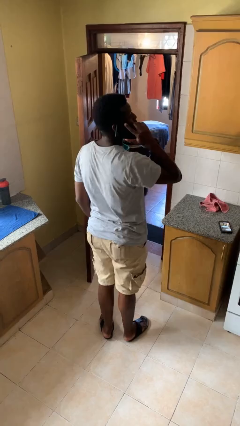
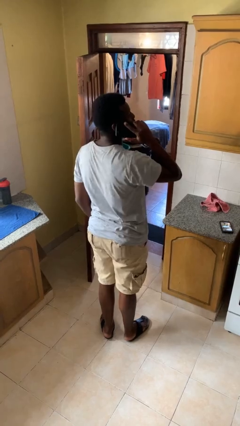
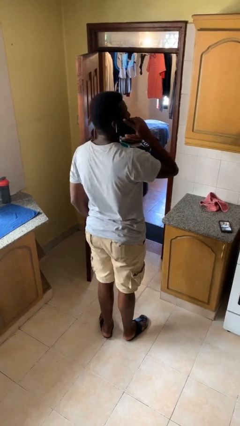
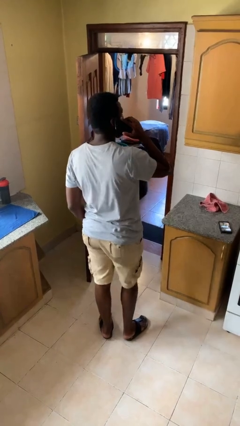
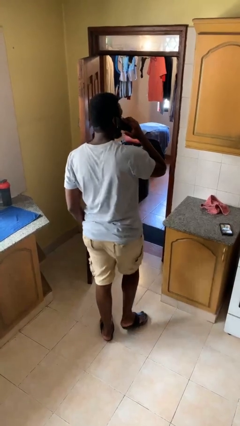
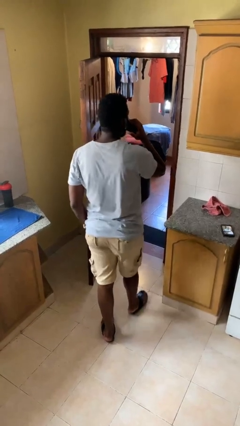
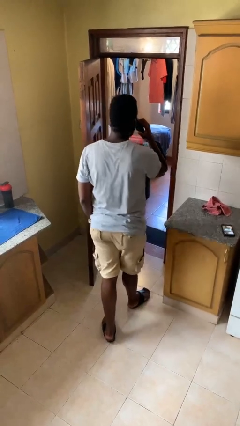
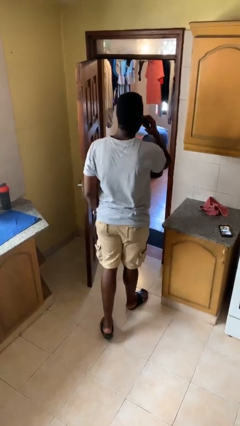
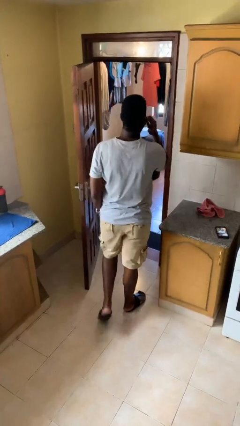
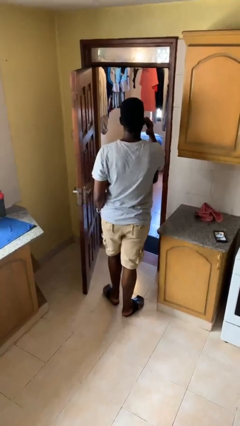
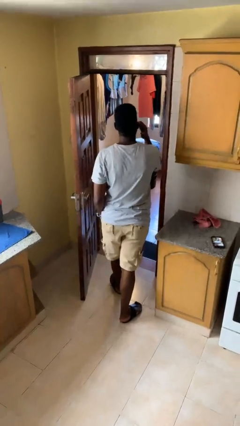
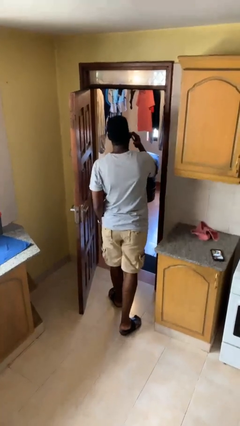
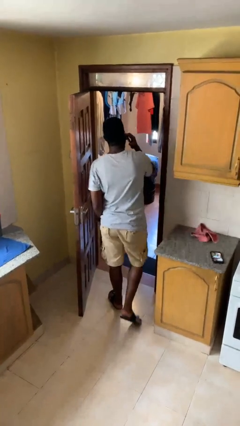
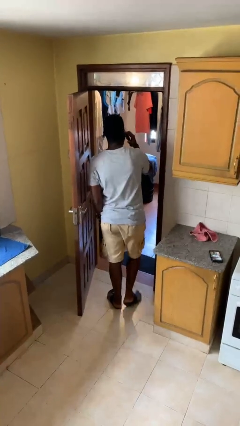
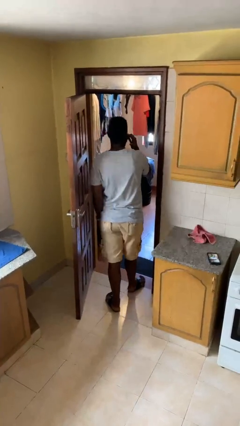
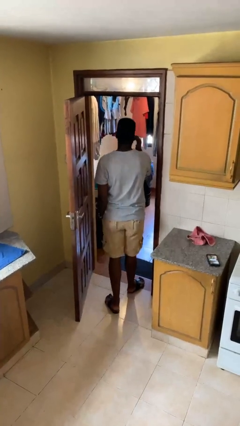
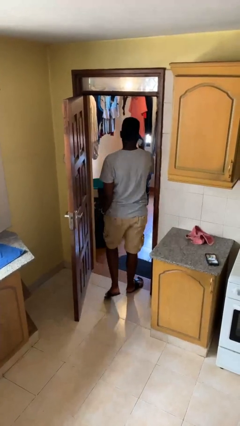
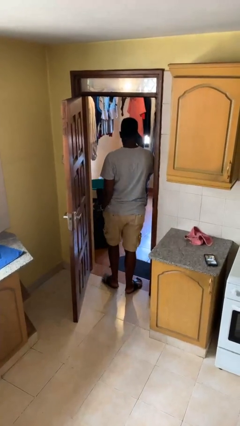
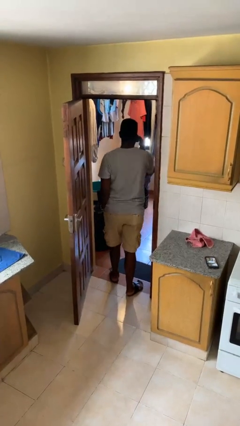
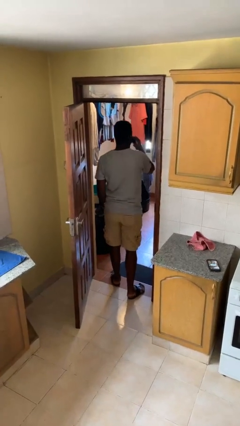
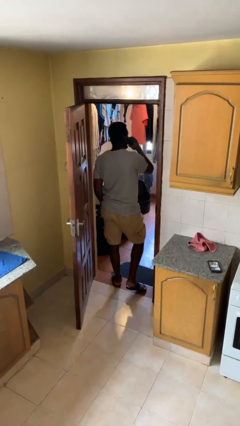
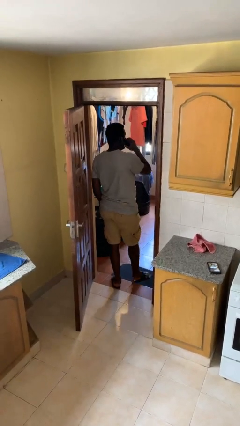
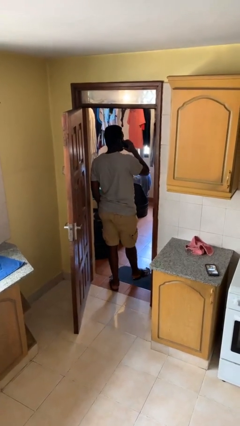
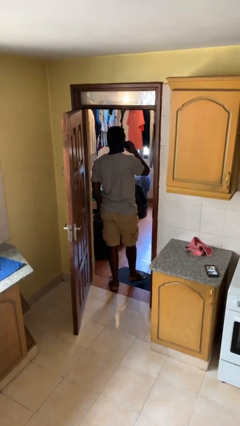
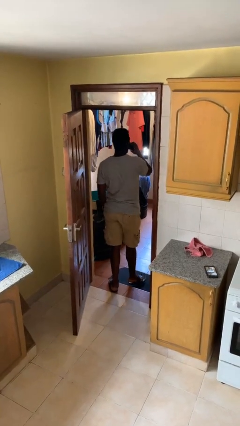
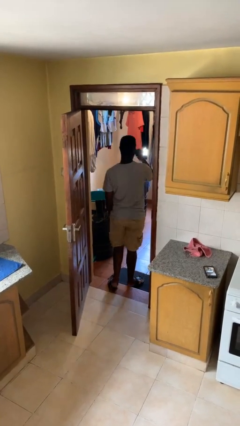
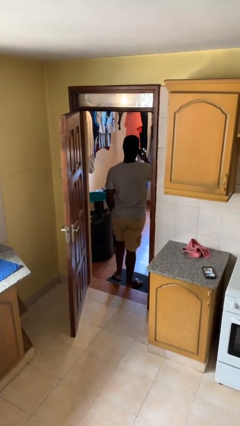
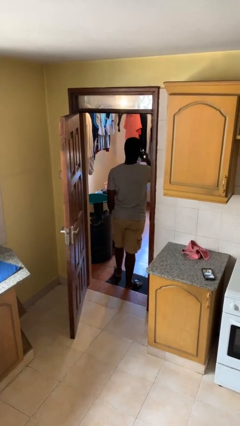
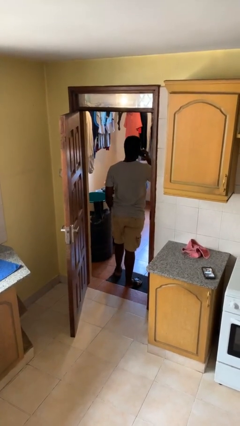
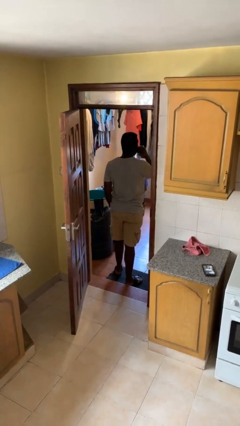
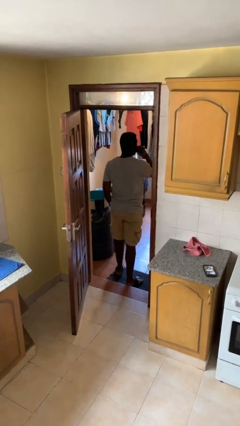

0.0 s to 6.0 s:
person exits scene through structure

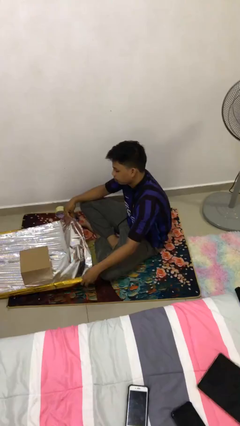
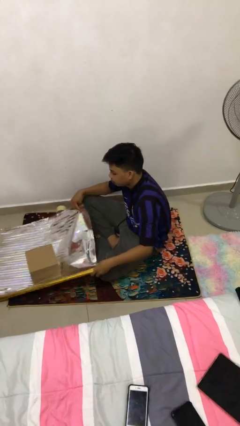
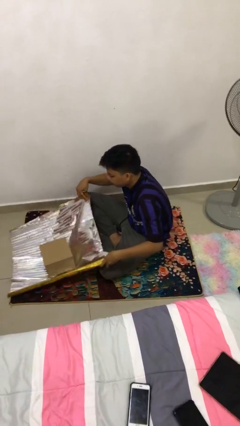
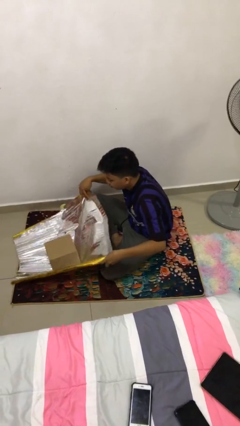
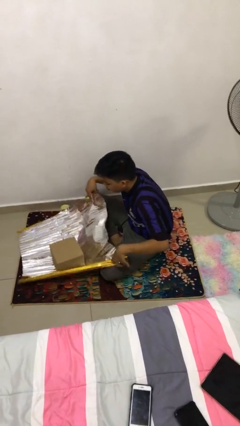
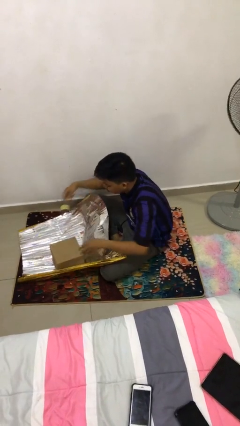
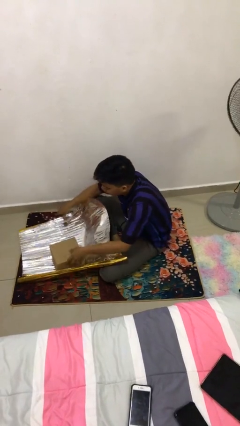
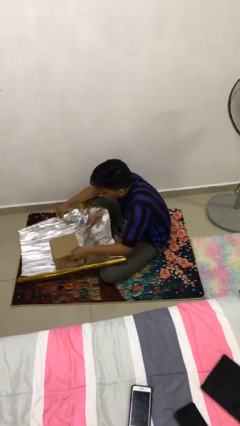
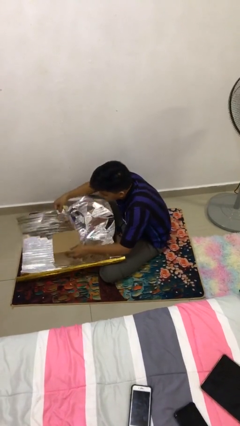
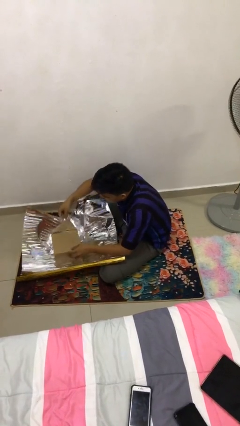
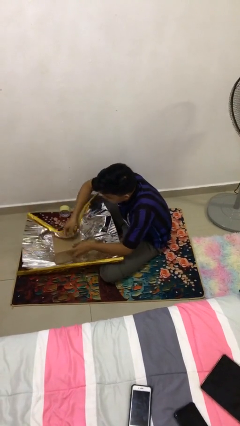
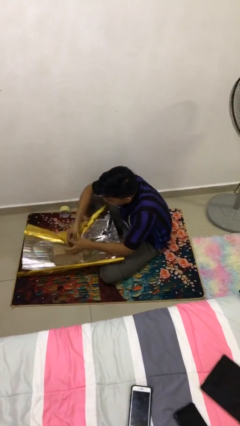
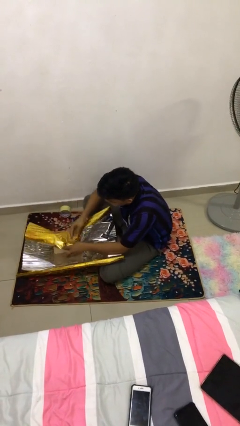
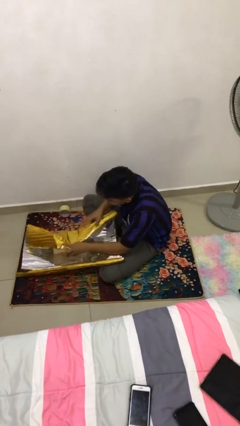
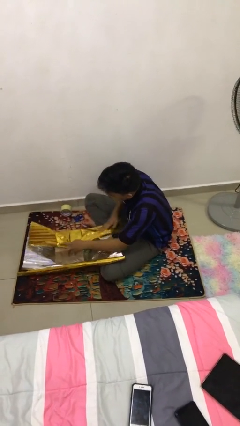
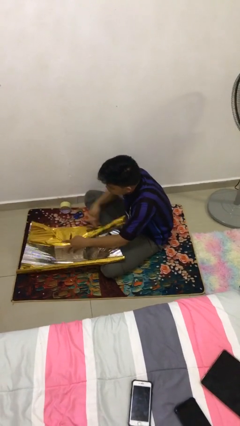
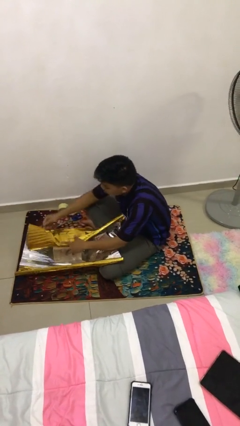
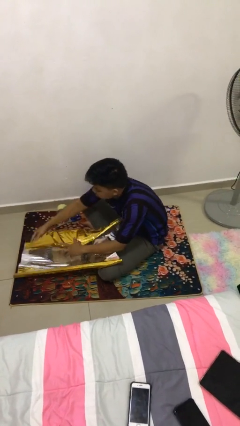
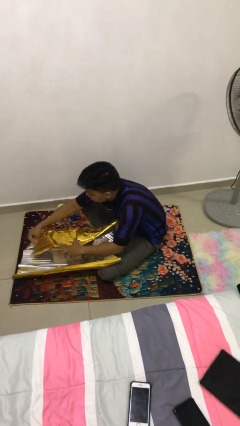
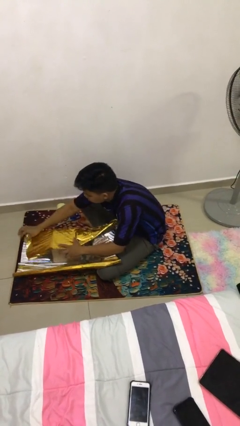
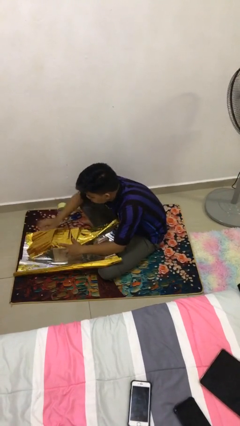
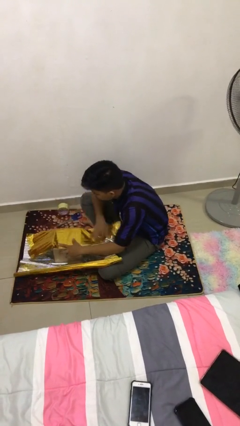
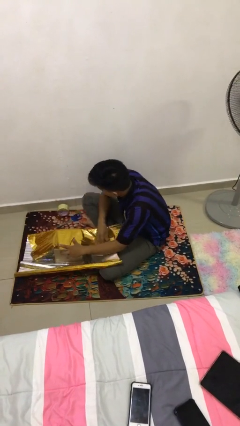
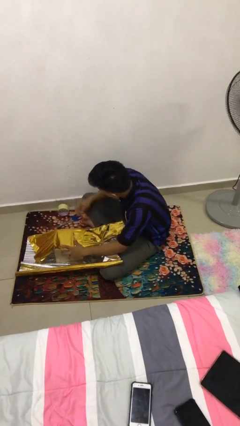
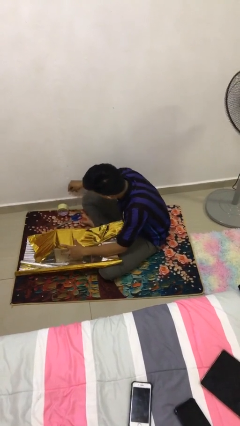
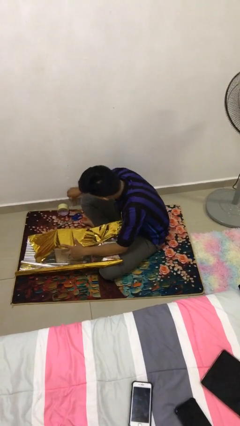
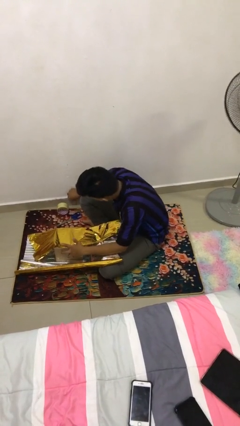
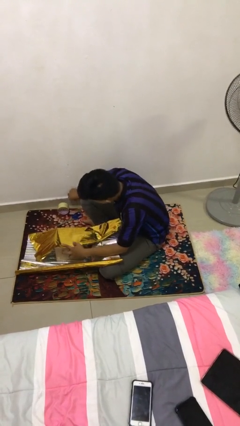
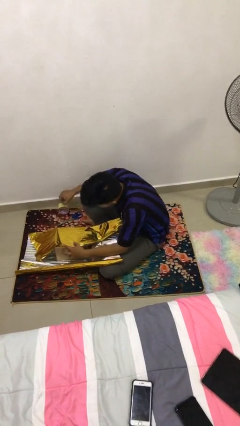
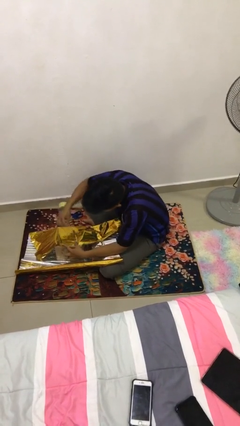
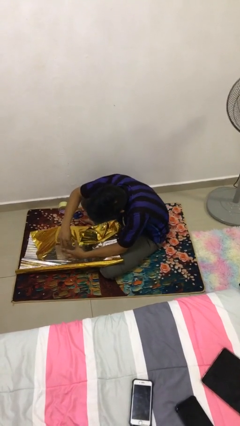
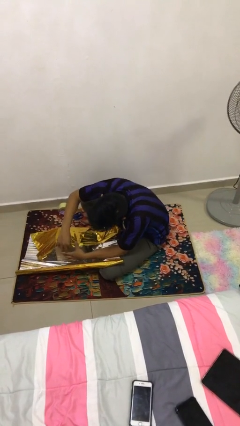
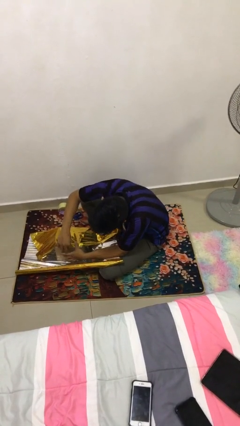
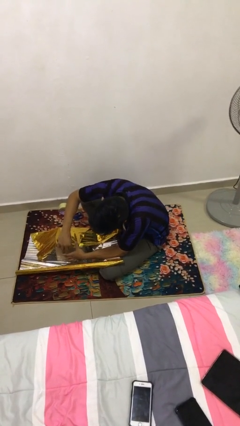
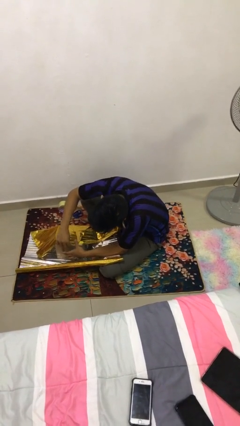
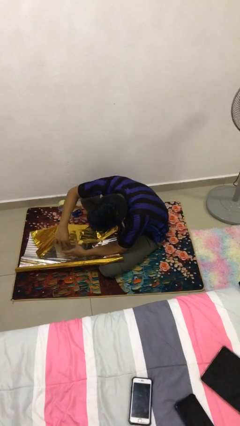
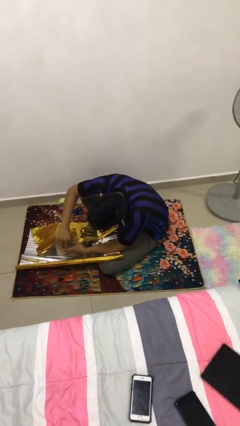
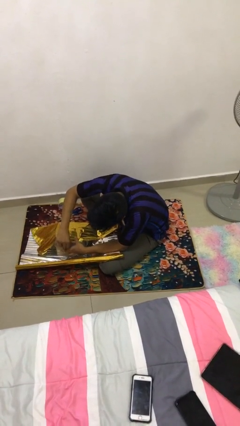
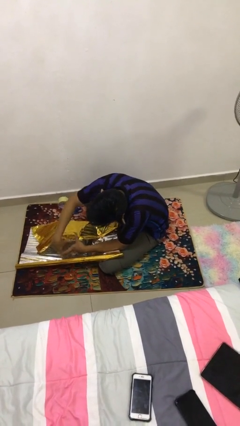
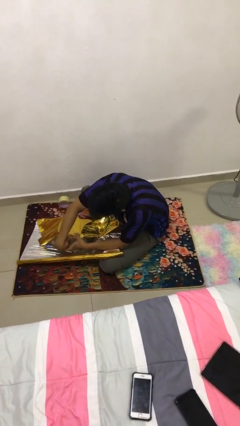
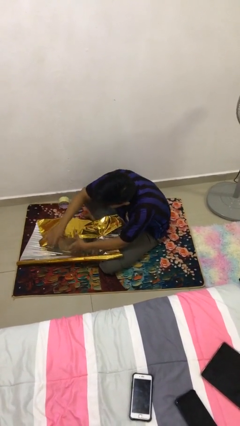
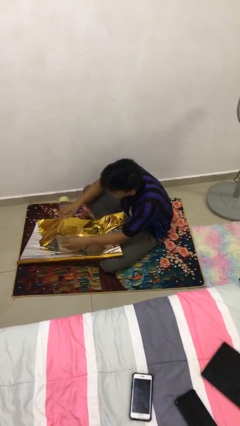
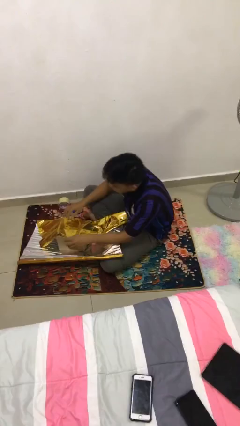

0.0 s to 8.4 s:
person wraps box

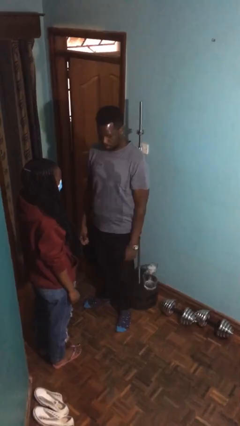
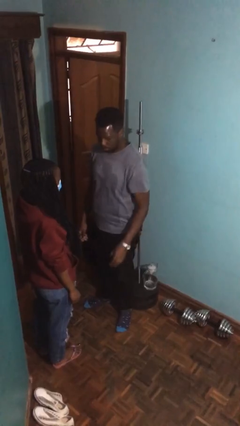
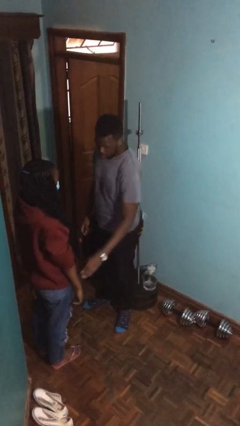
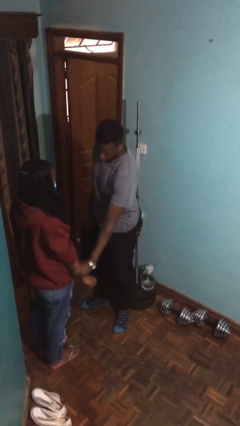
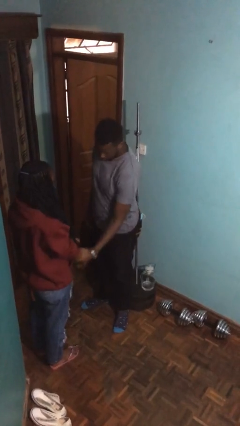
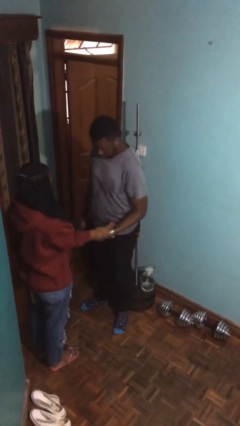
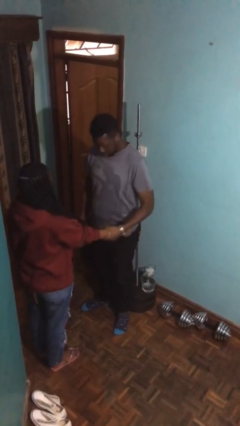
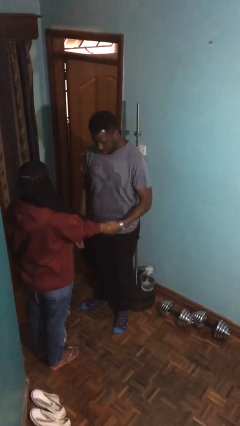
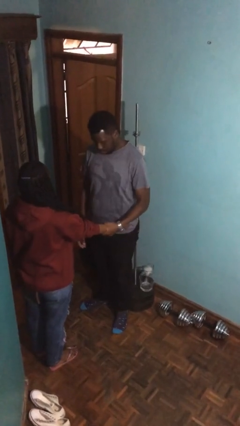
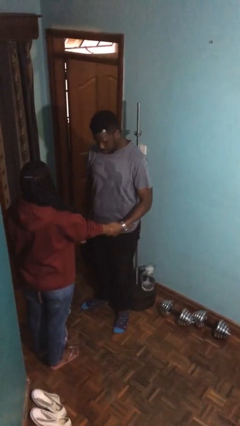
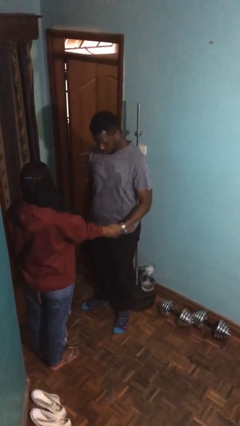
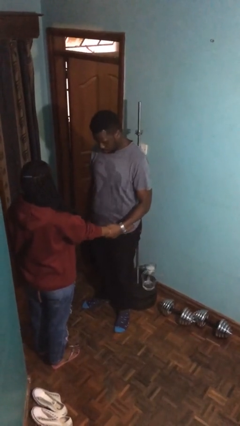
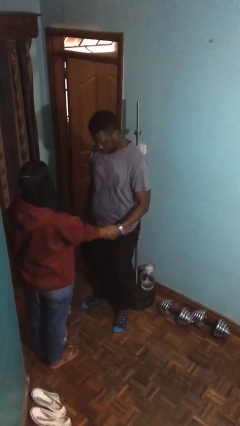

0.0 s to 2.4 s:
person grabs person by forearm

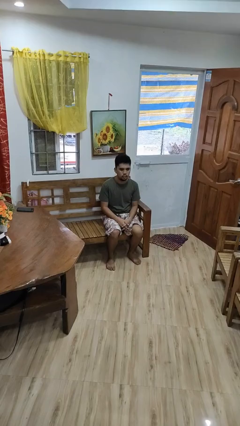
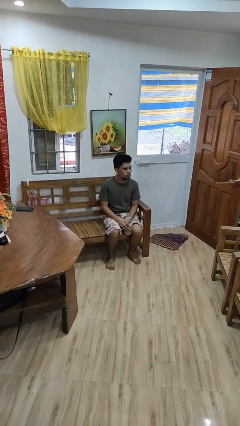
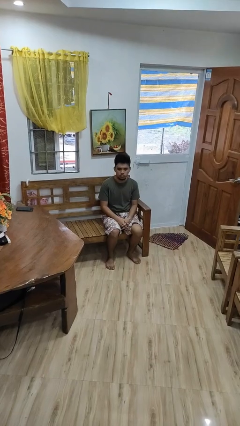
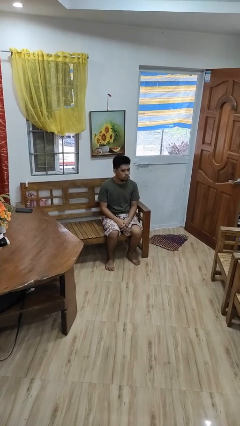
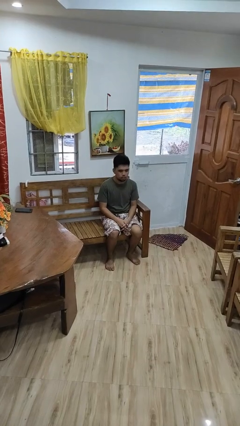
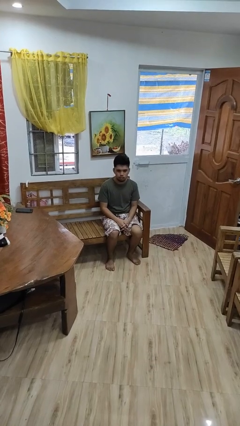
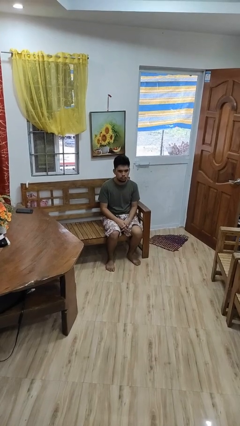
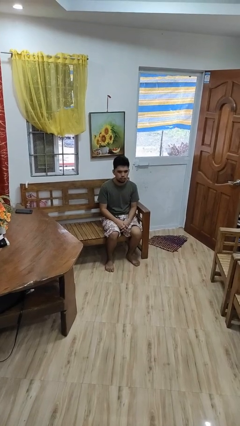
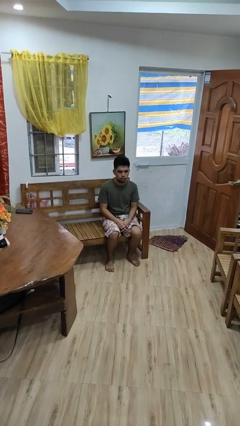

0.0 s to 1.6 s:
person shakes head
